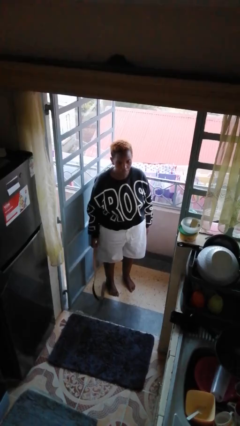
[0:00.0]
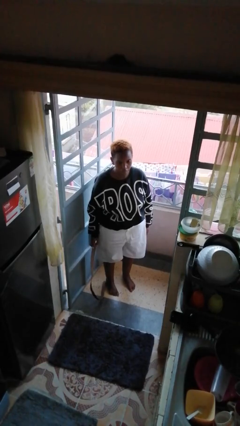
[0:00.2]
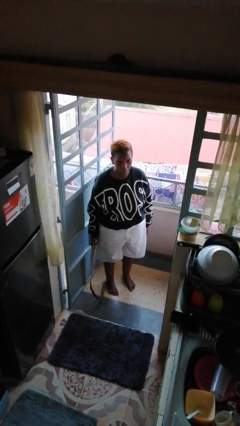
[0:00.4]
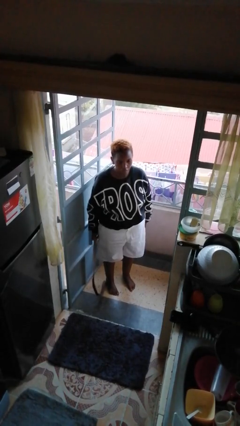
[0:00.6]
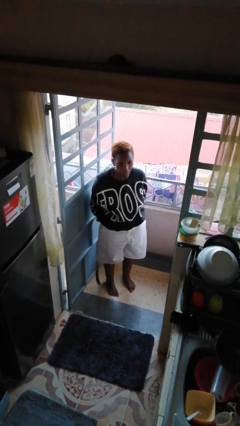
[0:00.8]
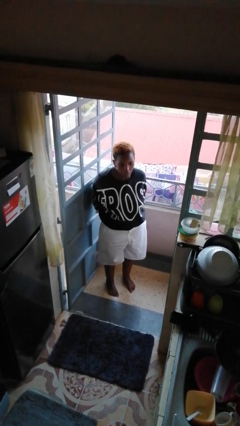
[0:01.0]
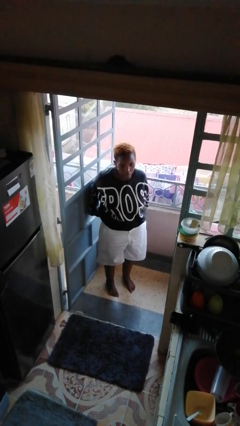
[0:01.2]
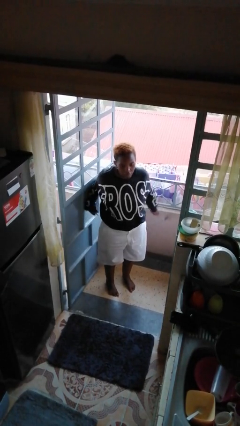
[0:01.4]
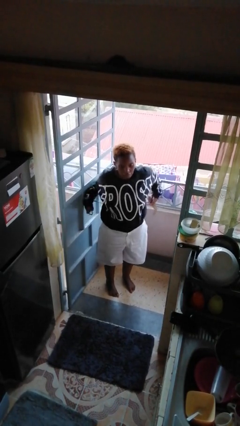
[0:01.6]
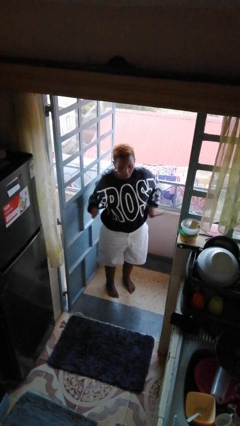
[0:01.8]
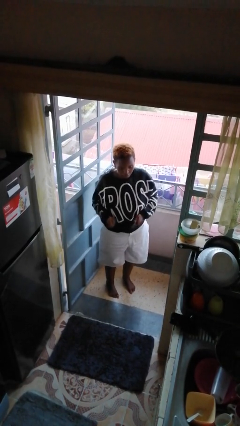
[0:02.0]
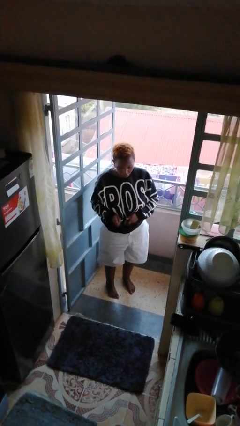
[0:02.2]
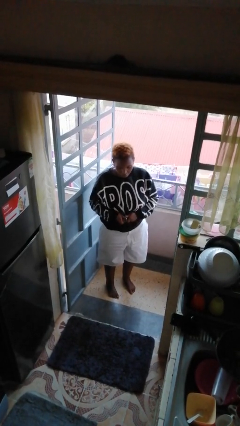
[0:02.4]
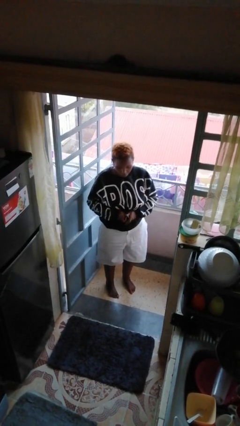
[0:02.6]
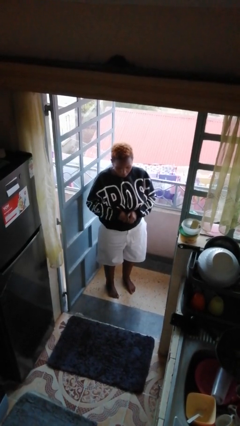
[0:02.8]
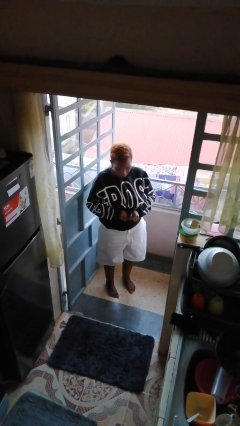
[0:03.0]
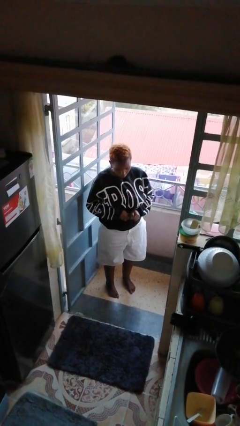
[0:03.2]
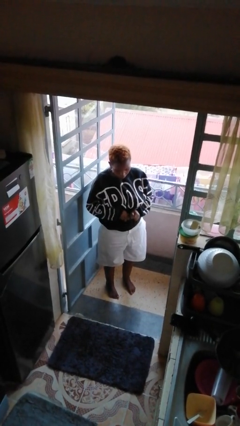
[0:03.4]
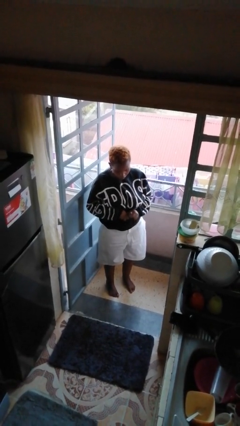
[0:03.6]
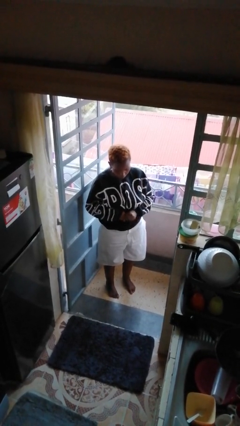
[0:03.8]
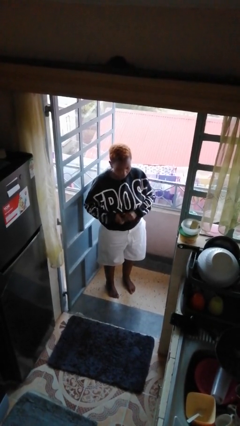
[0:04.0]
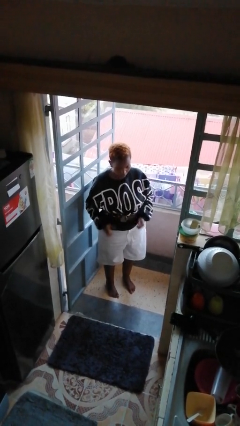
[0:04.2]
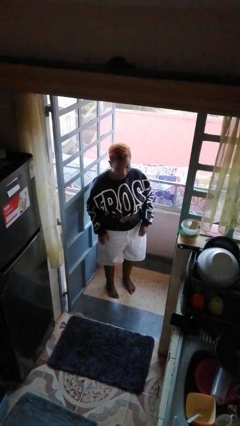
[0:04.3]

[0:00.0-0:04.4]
person puts on belt

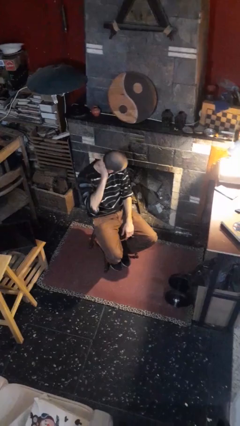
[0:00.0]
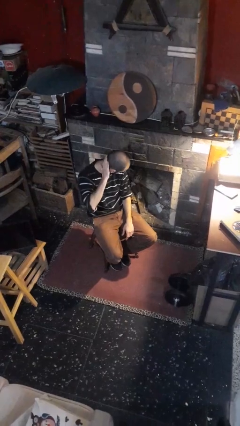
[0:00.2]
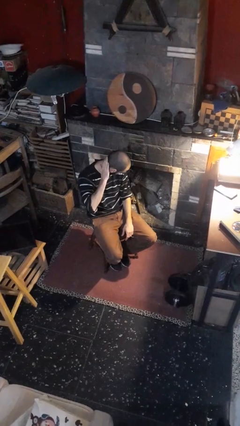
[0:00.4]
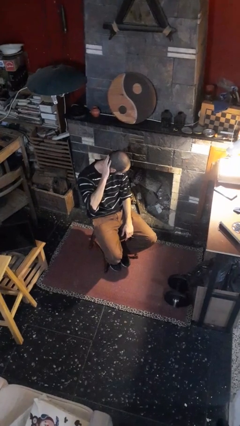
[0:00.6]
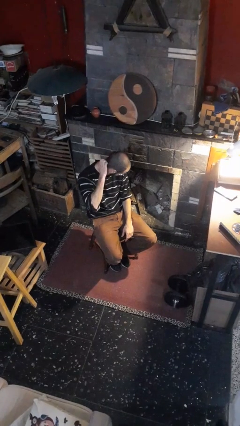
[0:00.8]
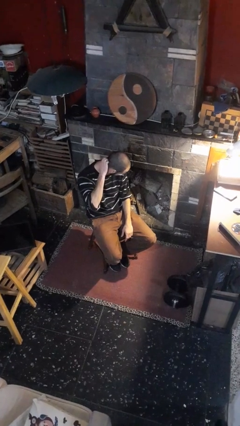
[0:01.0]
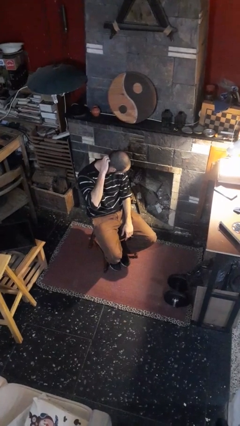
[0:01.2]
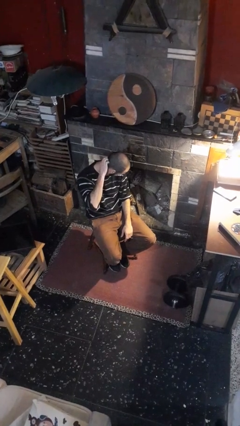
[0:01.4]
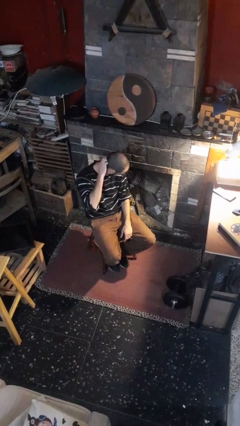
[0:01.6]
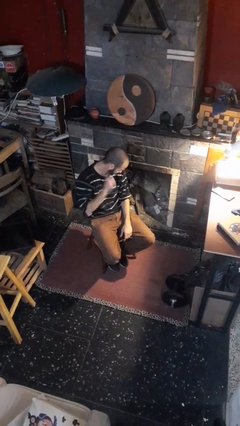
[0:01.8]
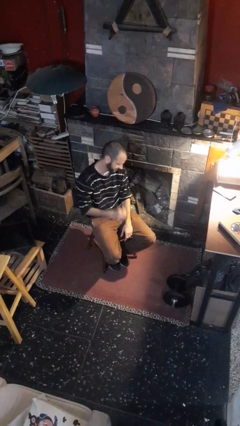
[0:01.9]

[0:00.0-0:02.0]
person swats bug

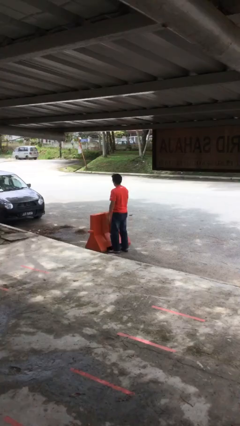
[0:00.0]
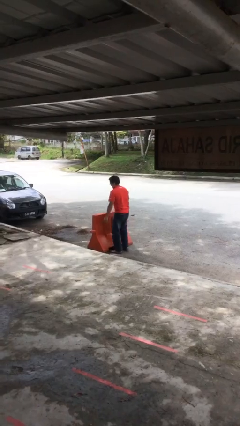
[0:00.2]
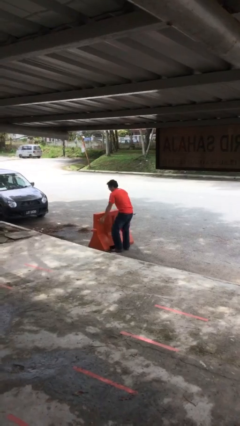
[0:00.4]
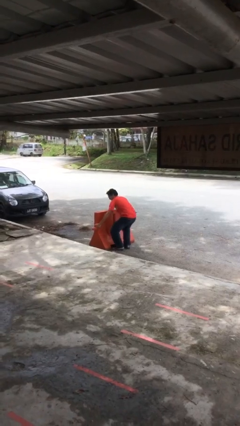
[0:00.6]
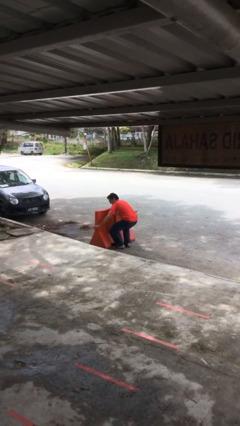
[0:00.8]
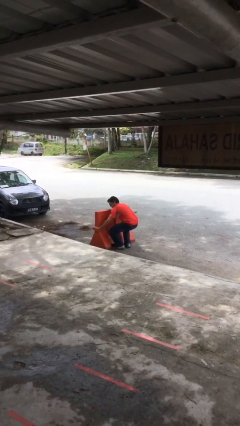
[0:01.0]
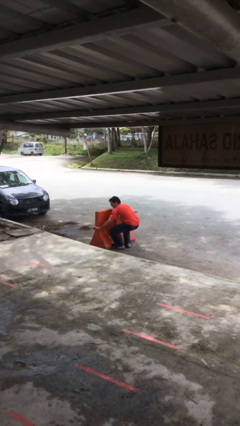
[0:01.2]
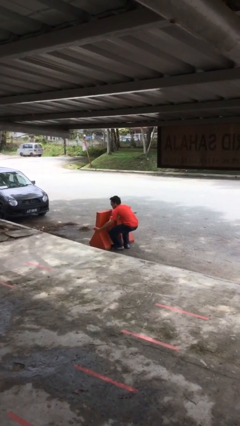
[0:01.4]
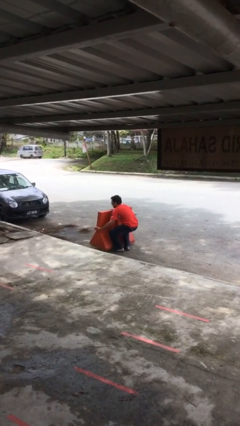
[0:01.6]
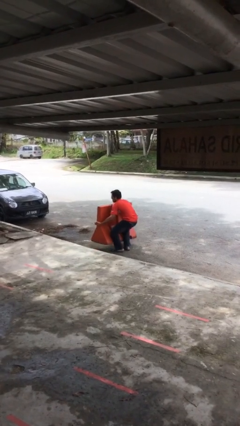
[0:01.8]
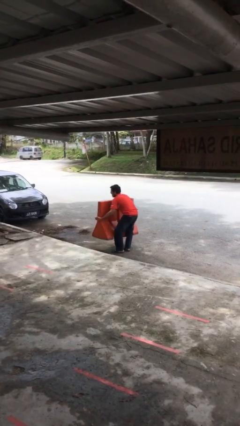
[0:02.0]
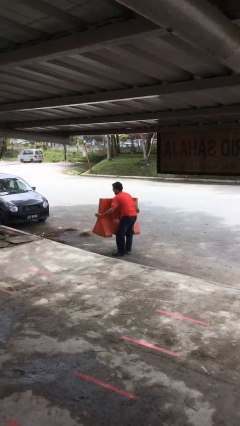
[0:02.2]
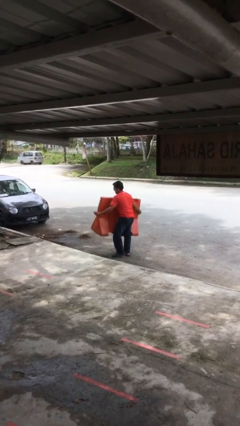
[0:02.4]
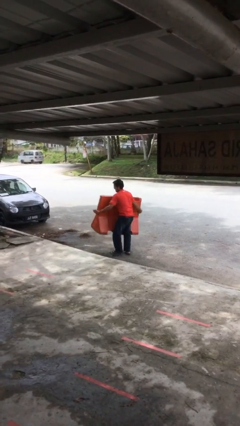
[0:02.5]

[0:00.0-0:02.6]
person picks up object from floor

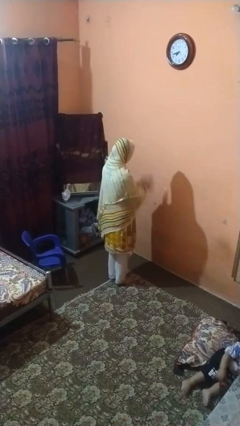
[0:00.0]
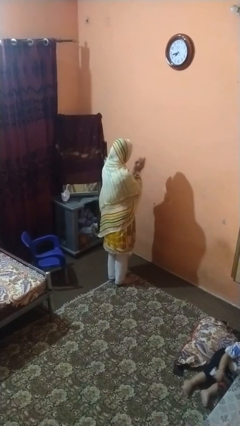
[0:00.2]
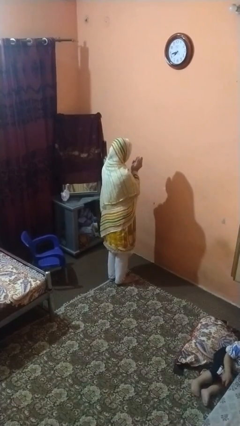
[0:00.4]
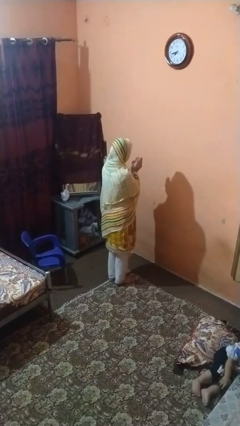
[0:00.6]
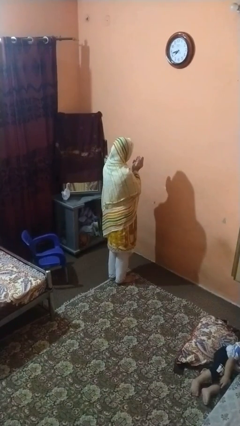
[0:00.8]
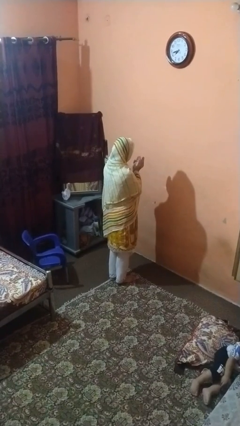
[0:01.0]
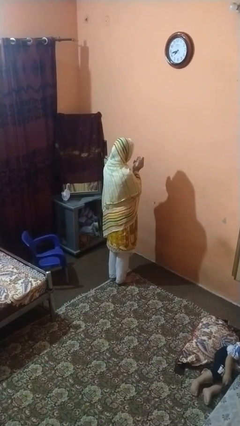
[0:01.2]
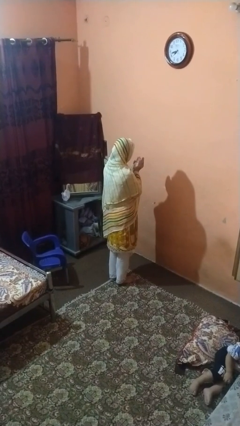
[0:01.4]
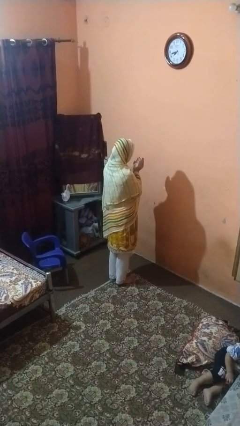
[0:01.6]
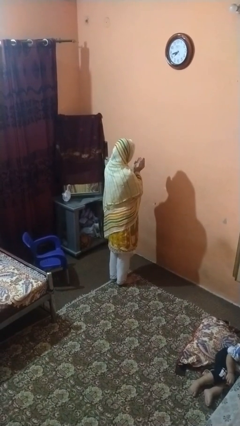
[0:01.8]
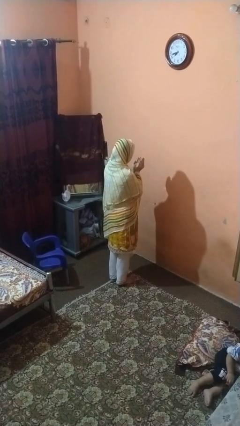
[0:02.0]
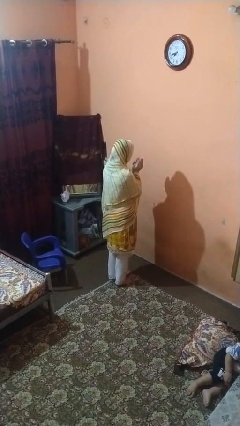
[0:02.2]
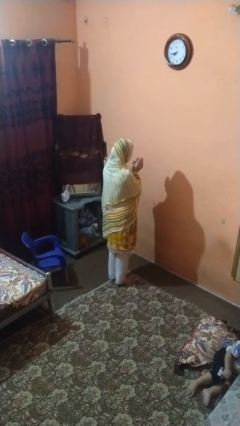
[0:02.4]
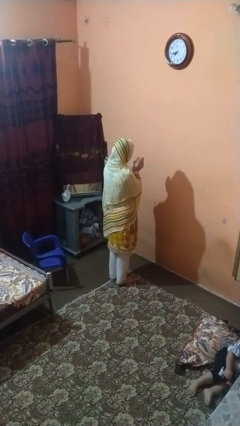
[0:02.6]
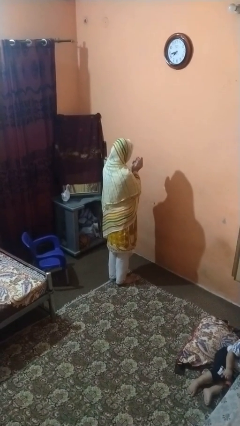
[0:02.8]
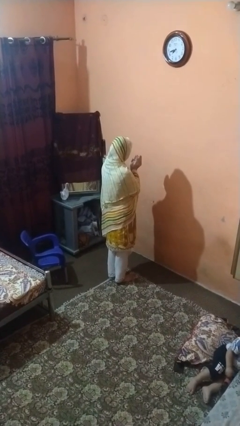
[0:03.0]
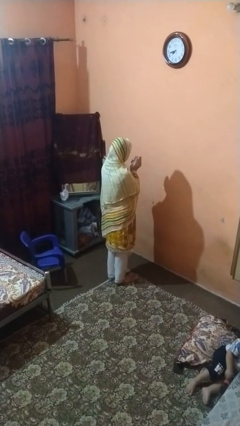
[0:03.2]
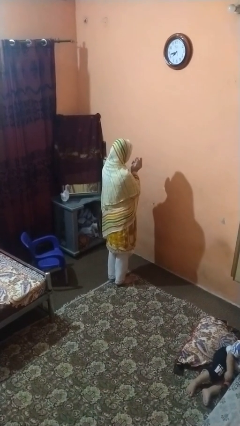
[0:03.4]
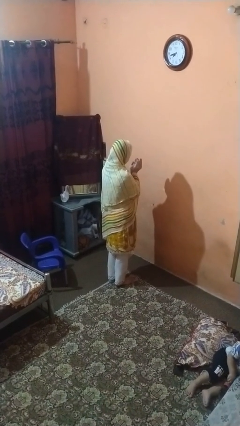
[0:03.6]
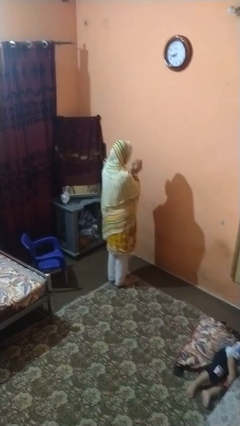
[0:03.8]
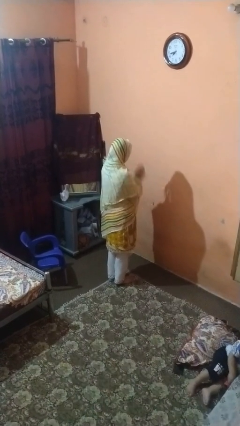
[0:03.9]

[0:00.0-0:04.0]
person prays

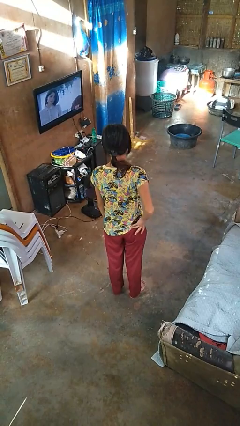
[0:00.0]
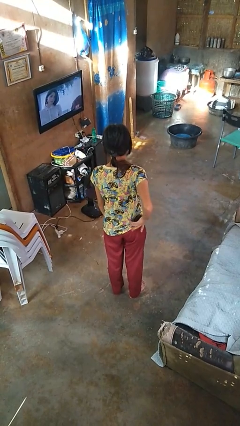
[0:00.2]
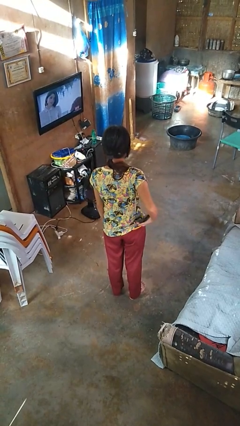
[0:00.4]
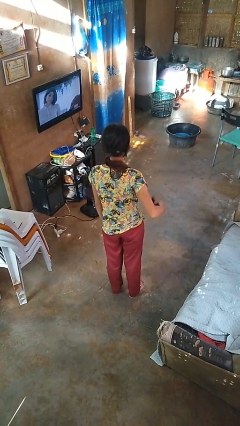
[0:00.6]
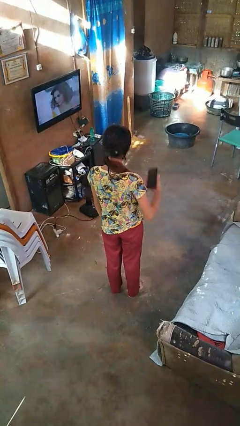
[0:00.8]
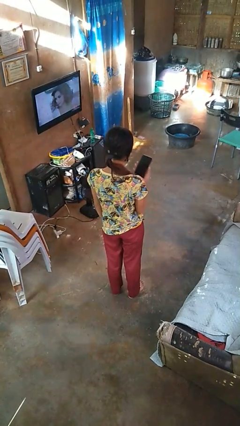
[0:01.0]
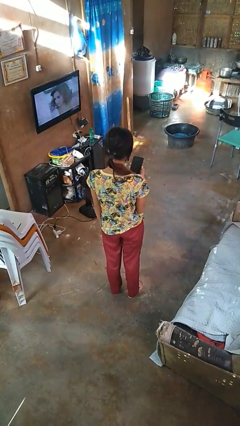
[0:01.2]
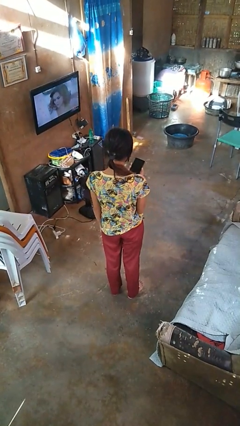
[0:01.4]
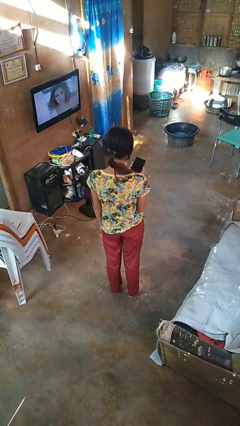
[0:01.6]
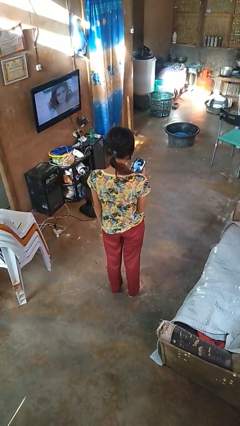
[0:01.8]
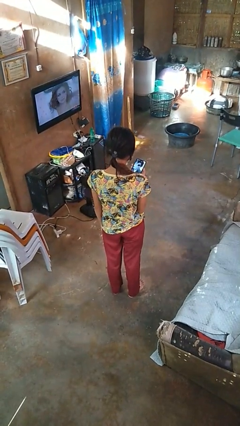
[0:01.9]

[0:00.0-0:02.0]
person takes phone from pocket

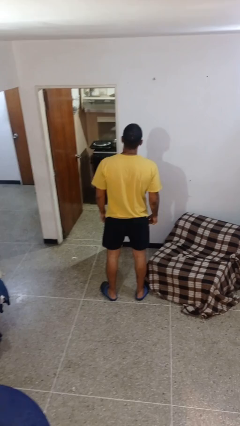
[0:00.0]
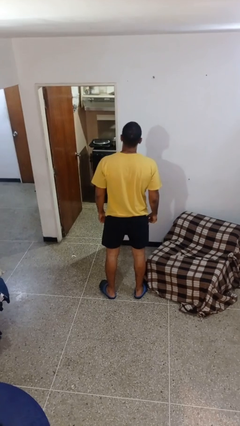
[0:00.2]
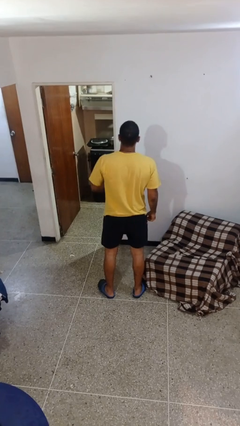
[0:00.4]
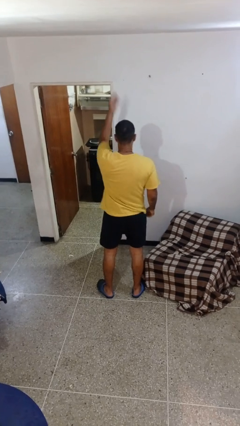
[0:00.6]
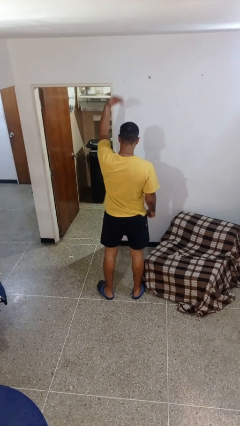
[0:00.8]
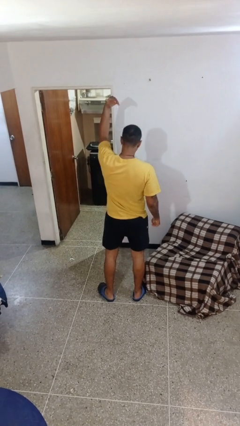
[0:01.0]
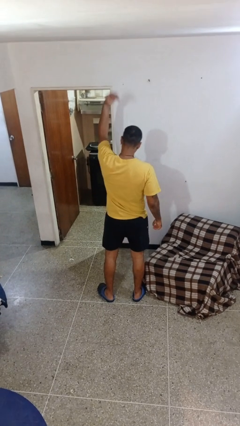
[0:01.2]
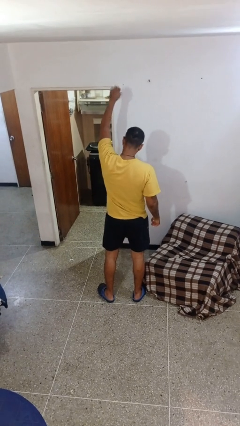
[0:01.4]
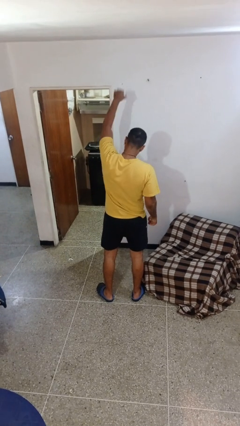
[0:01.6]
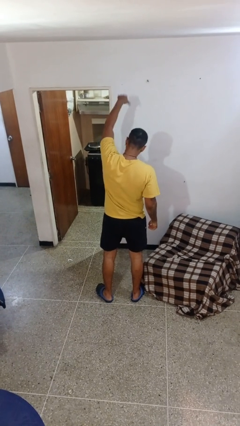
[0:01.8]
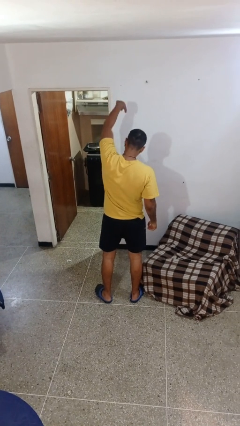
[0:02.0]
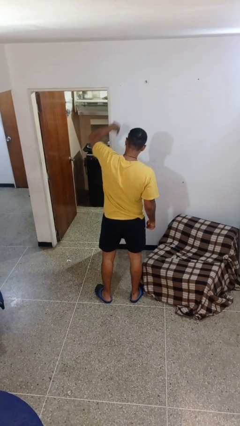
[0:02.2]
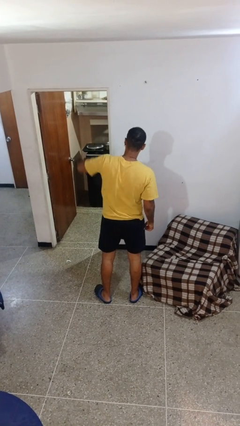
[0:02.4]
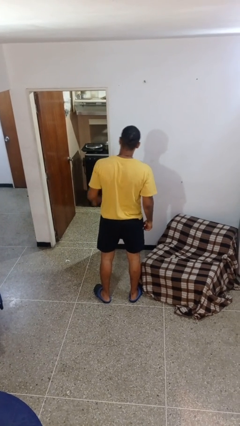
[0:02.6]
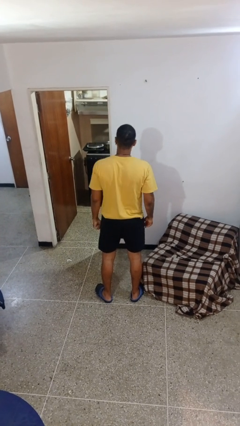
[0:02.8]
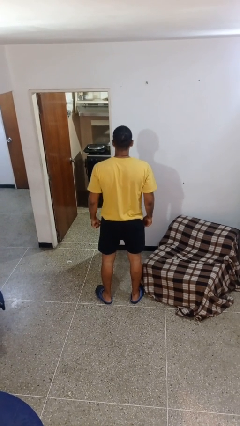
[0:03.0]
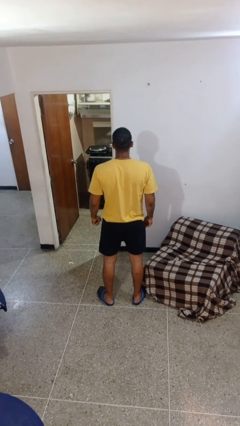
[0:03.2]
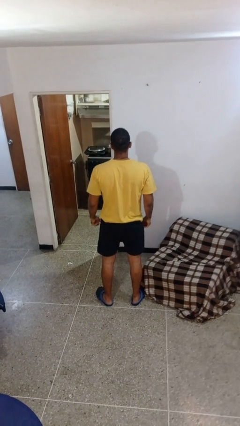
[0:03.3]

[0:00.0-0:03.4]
person gestures come here
